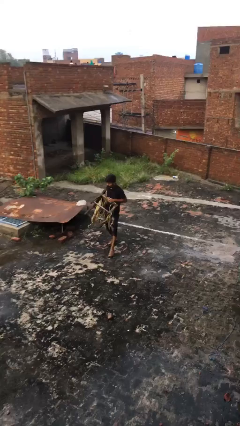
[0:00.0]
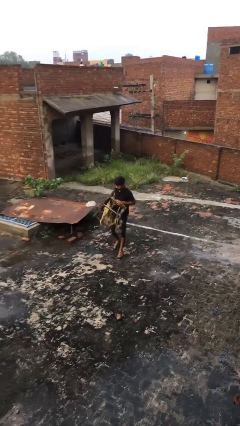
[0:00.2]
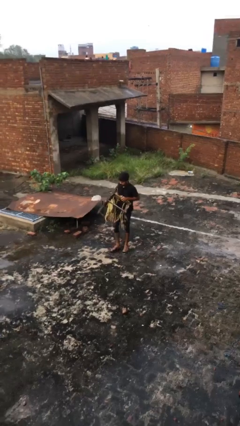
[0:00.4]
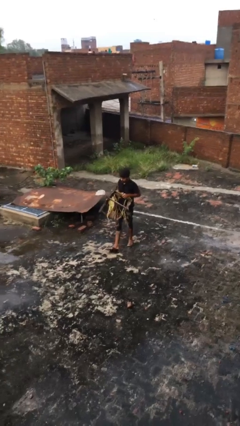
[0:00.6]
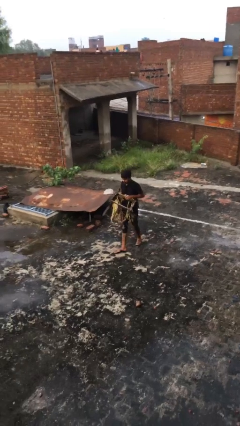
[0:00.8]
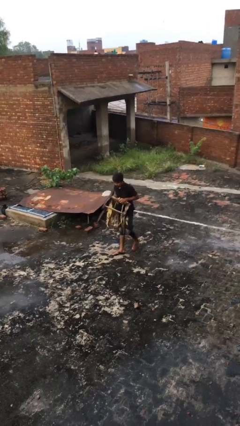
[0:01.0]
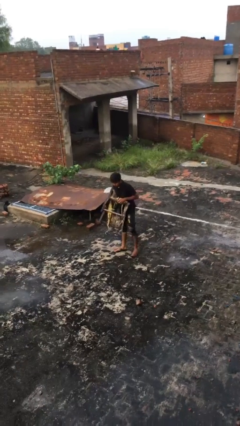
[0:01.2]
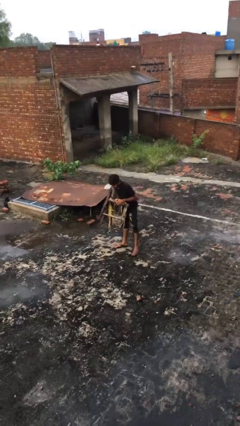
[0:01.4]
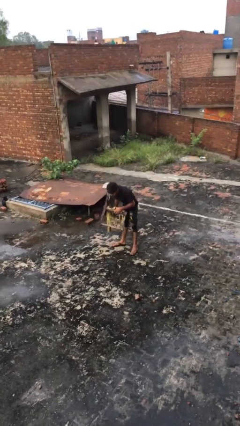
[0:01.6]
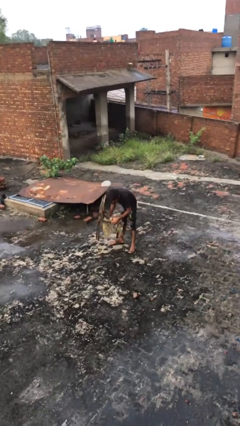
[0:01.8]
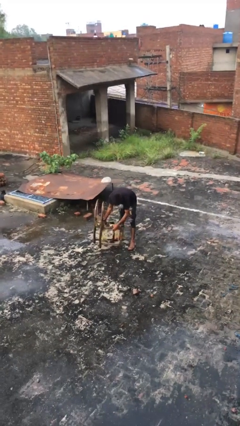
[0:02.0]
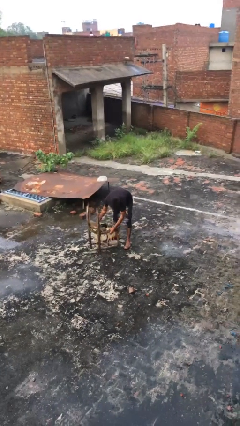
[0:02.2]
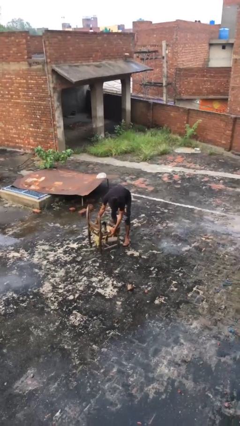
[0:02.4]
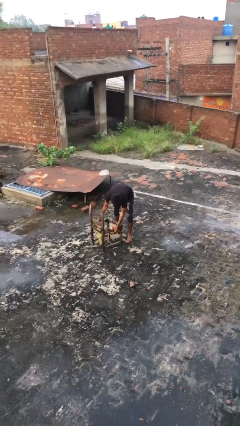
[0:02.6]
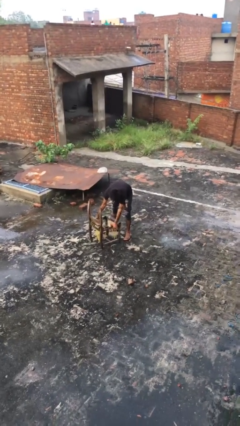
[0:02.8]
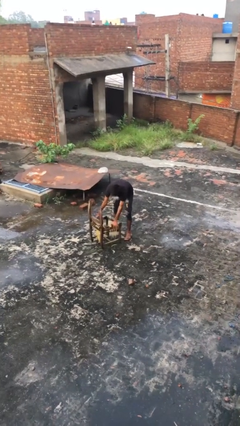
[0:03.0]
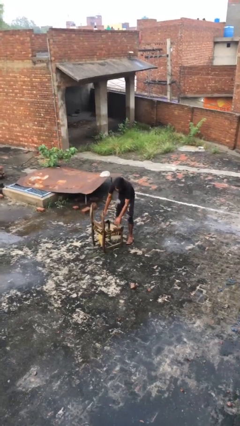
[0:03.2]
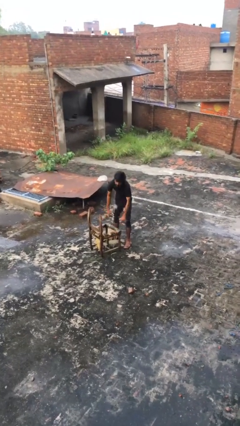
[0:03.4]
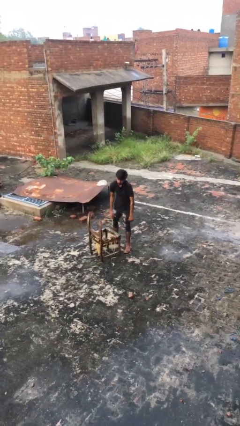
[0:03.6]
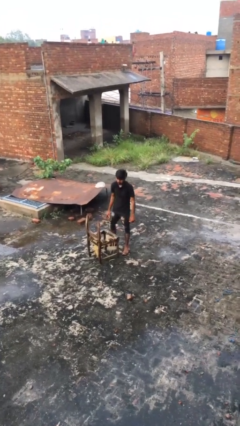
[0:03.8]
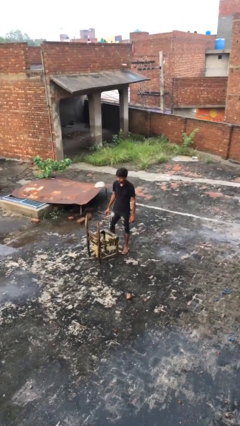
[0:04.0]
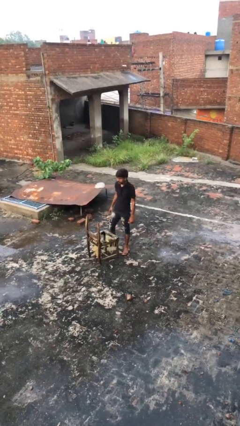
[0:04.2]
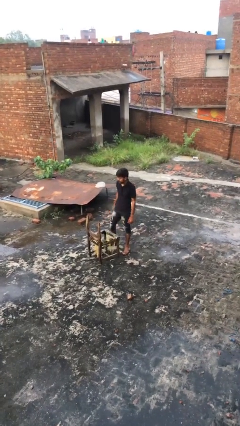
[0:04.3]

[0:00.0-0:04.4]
person puts down object on floor

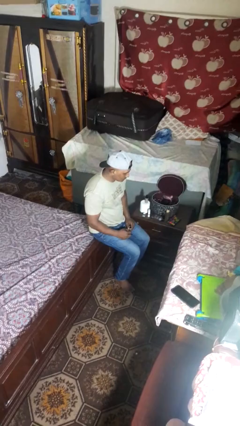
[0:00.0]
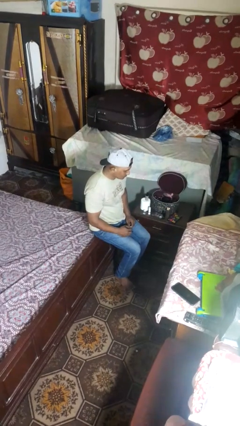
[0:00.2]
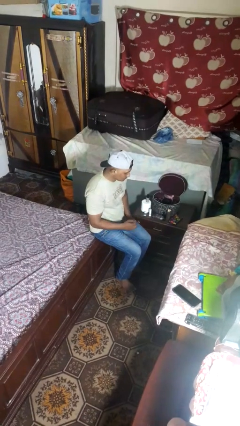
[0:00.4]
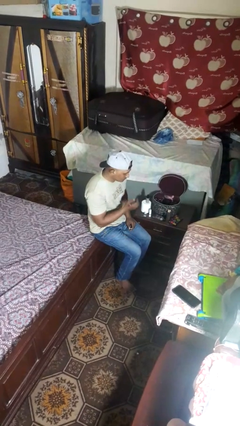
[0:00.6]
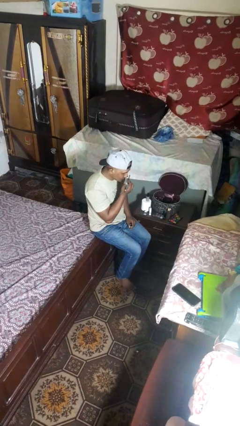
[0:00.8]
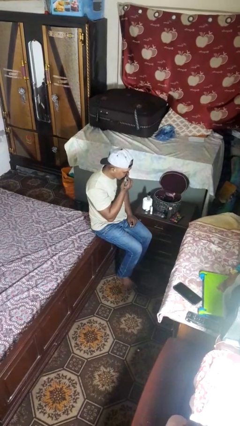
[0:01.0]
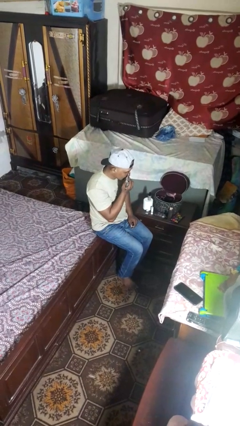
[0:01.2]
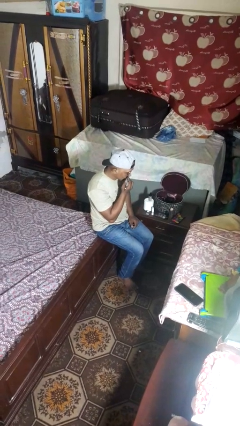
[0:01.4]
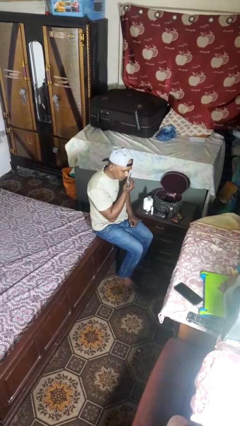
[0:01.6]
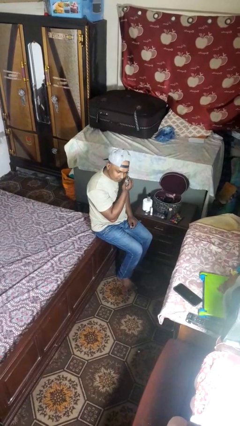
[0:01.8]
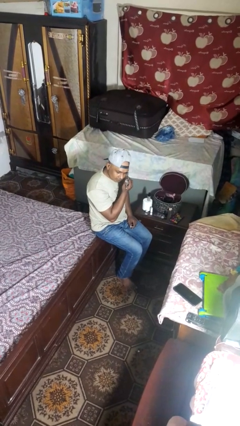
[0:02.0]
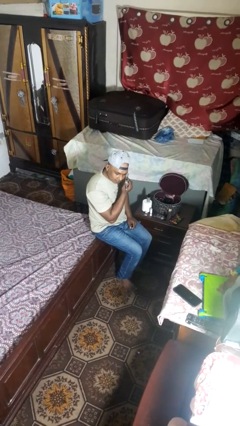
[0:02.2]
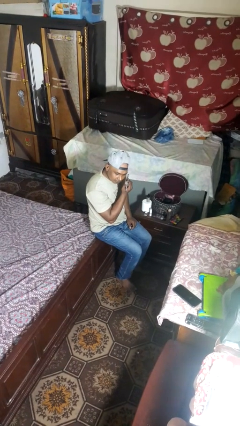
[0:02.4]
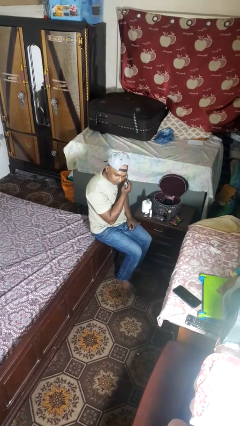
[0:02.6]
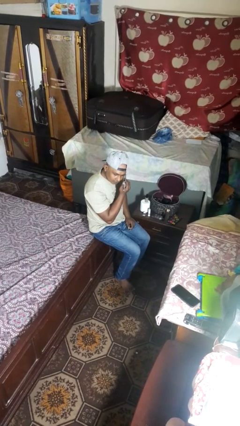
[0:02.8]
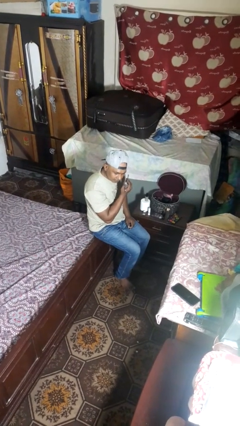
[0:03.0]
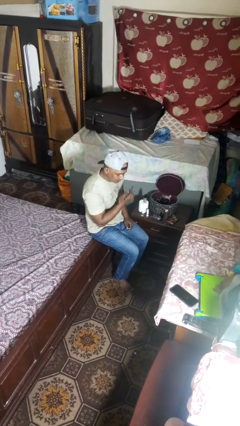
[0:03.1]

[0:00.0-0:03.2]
person applies eye makeup

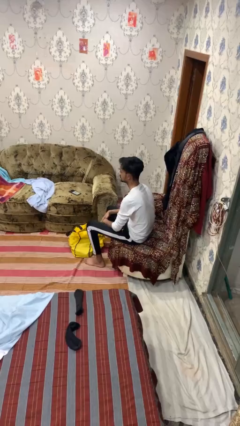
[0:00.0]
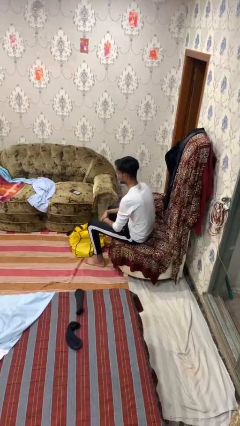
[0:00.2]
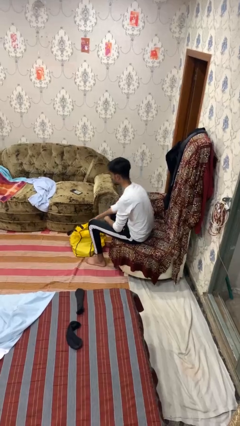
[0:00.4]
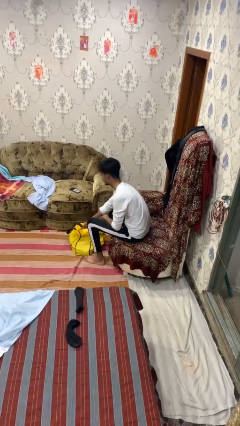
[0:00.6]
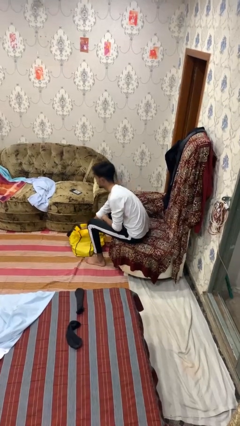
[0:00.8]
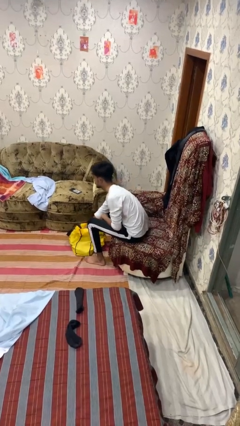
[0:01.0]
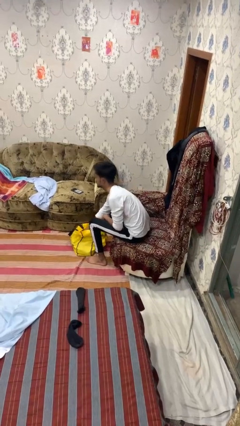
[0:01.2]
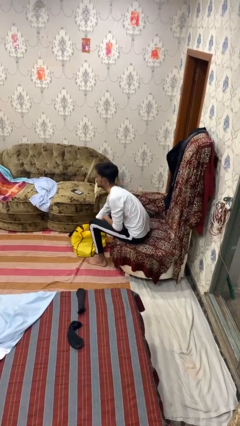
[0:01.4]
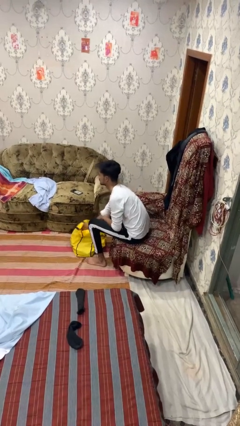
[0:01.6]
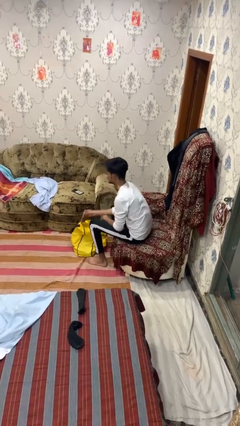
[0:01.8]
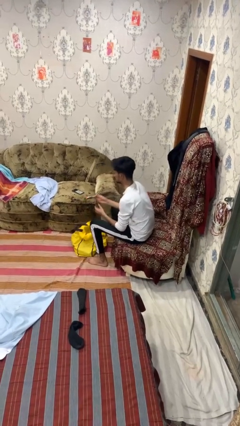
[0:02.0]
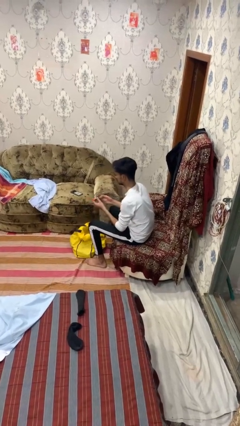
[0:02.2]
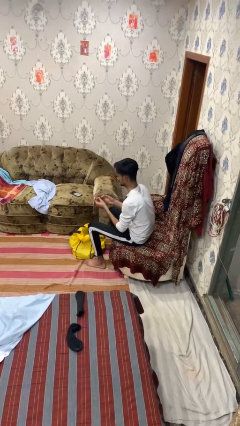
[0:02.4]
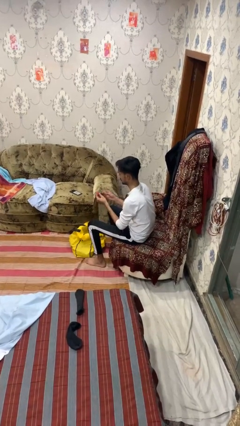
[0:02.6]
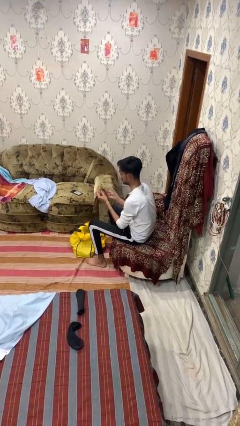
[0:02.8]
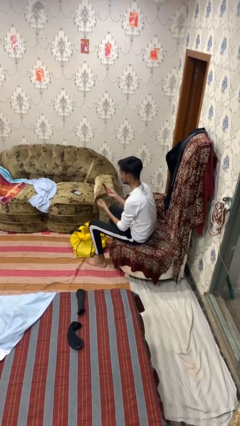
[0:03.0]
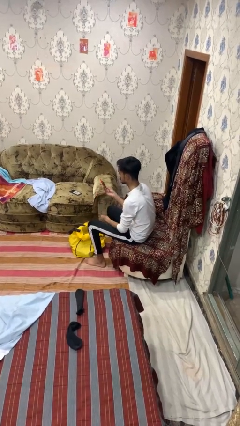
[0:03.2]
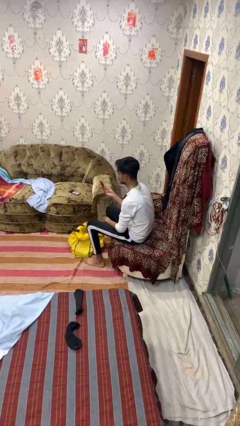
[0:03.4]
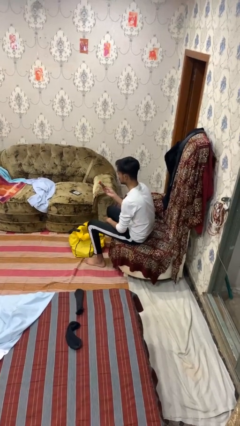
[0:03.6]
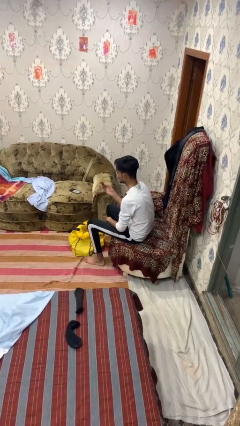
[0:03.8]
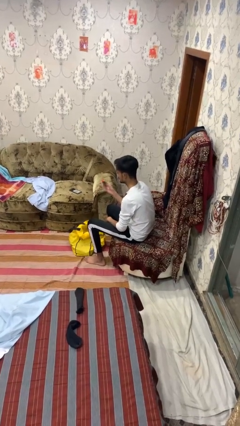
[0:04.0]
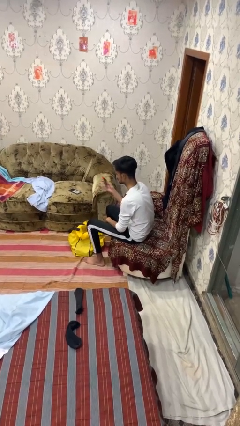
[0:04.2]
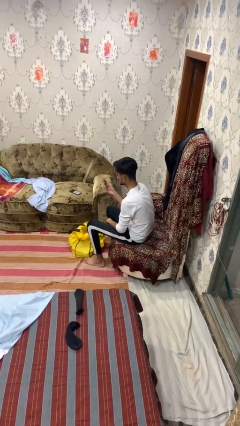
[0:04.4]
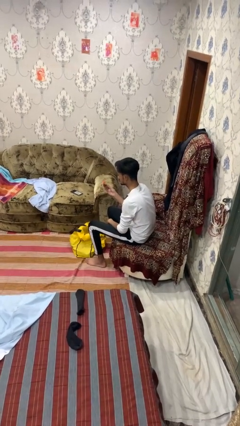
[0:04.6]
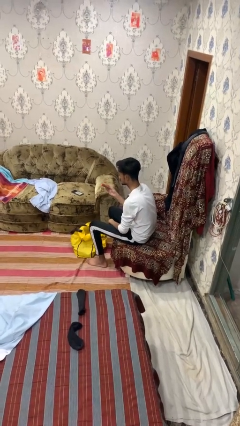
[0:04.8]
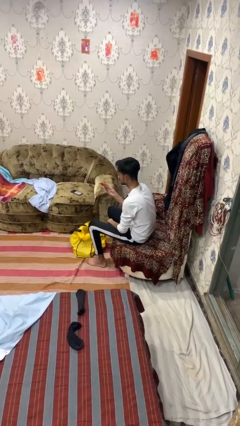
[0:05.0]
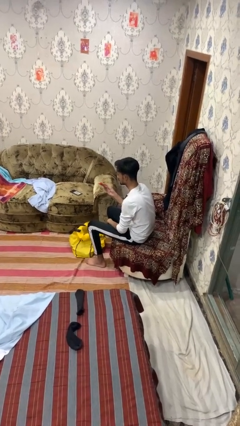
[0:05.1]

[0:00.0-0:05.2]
person takes object from bag

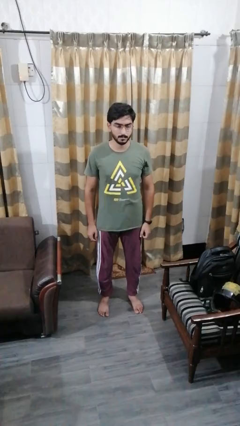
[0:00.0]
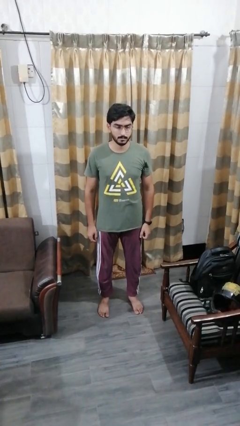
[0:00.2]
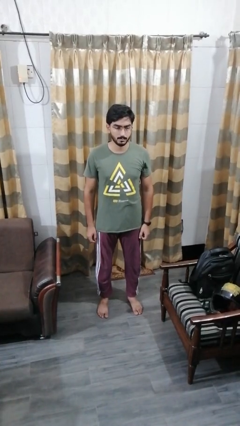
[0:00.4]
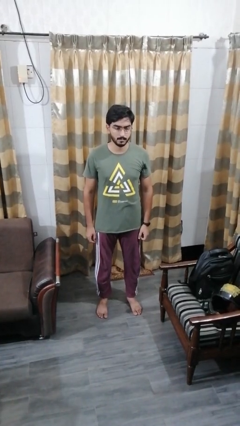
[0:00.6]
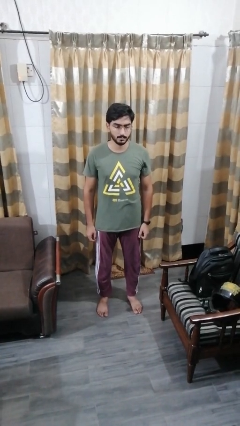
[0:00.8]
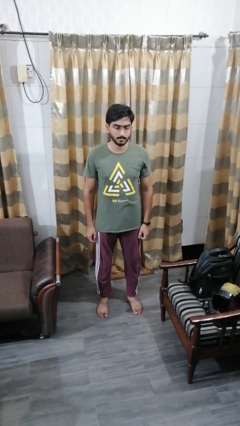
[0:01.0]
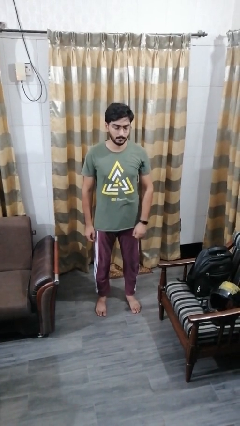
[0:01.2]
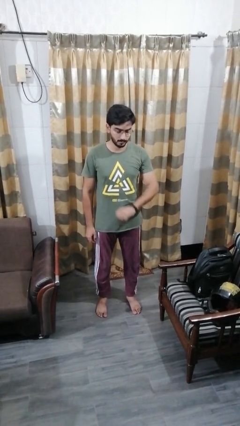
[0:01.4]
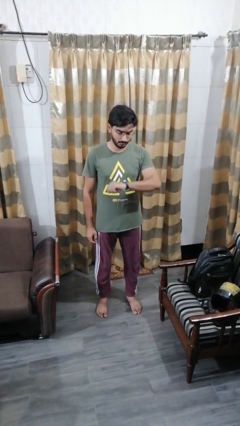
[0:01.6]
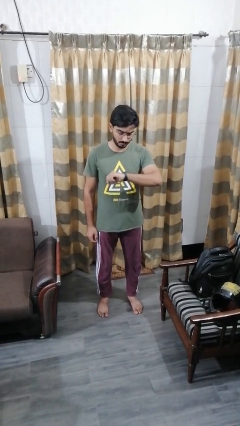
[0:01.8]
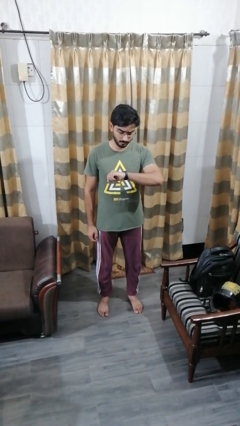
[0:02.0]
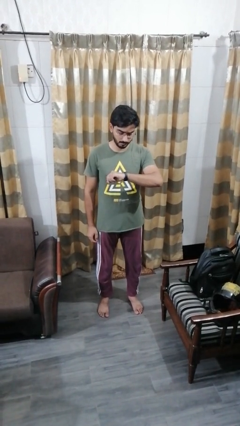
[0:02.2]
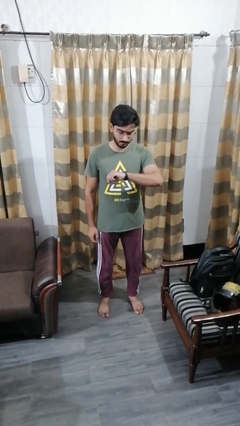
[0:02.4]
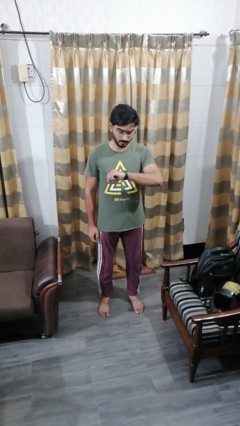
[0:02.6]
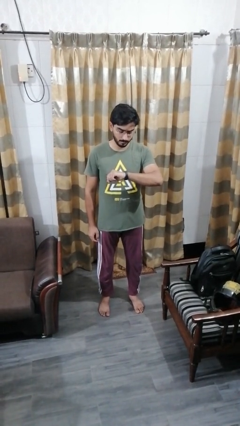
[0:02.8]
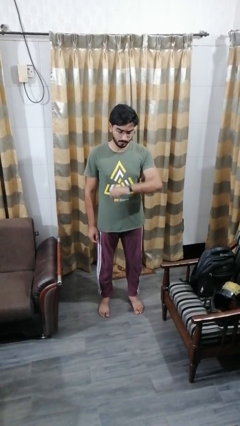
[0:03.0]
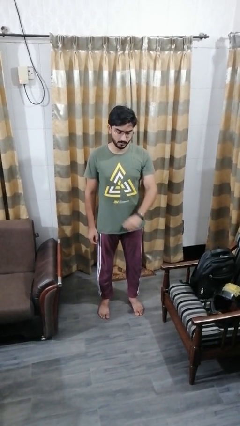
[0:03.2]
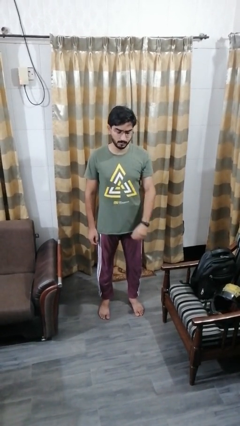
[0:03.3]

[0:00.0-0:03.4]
person looks at wristwatch

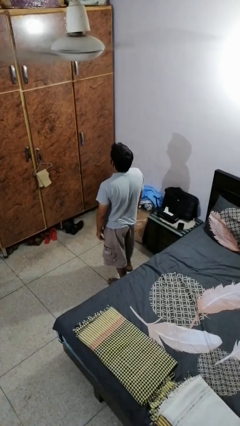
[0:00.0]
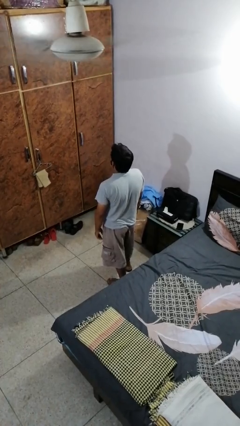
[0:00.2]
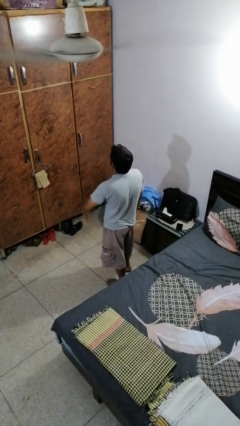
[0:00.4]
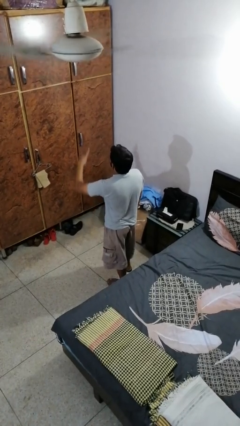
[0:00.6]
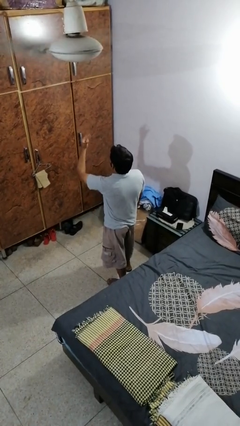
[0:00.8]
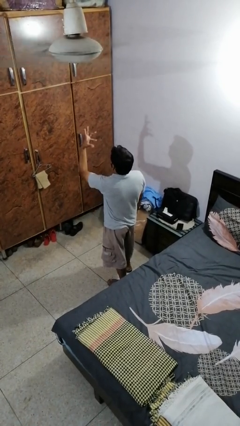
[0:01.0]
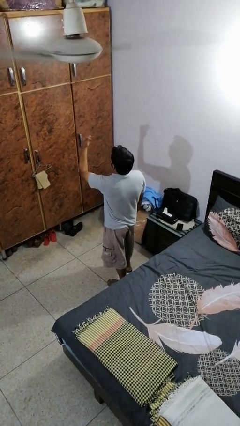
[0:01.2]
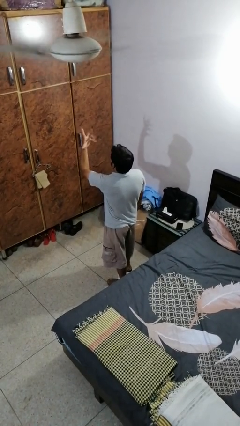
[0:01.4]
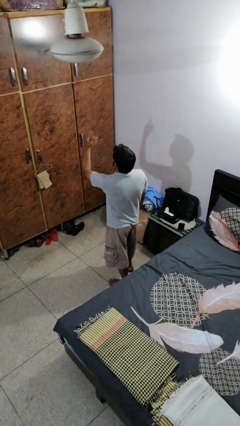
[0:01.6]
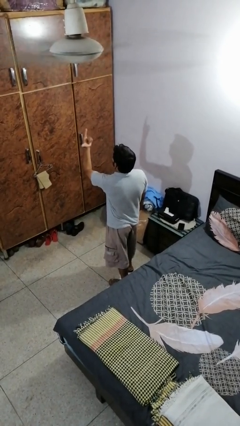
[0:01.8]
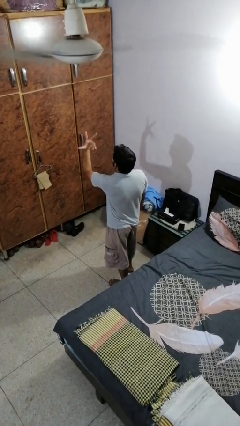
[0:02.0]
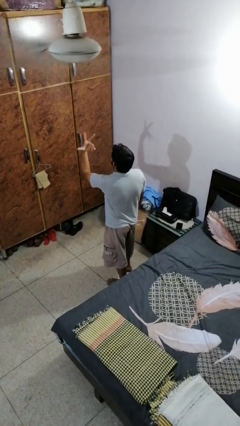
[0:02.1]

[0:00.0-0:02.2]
person snaps fingers
